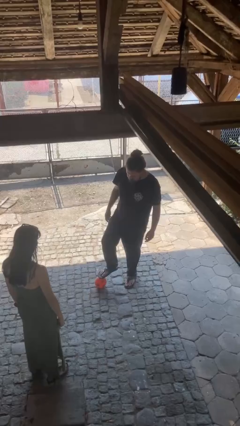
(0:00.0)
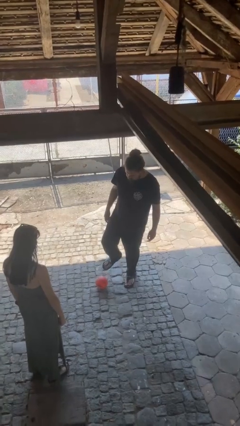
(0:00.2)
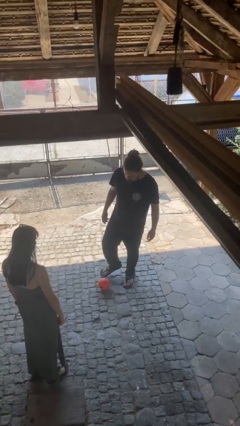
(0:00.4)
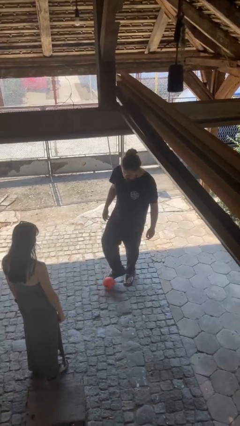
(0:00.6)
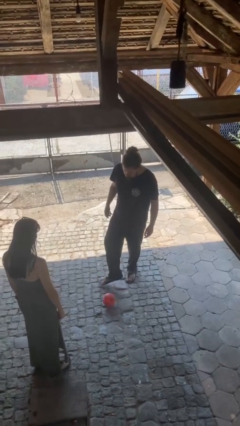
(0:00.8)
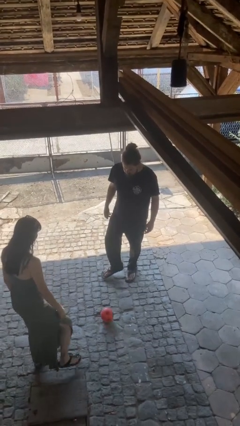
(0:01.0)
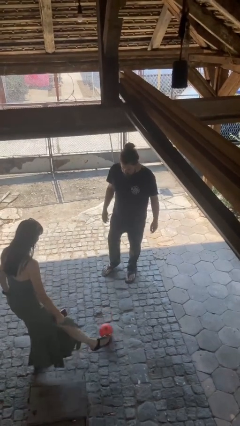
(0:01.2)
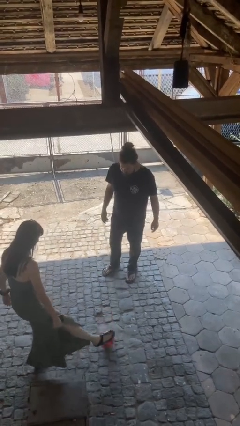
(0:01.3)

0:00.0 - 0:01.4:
person kicks object to person

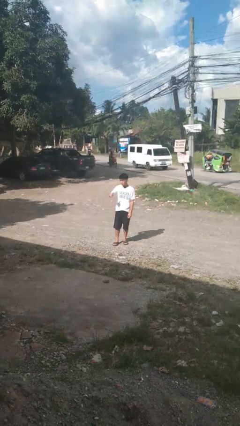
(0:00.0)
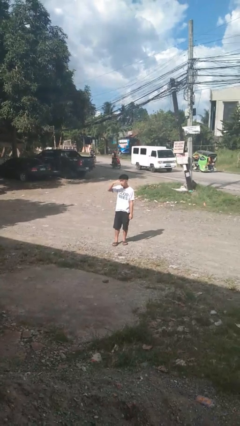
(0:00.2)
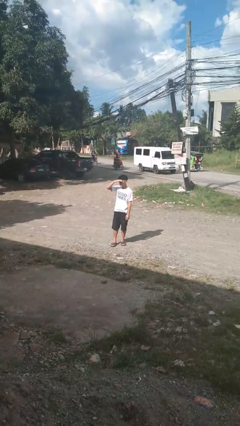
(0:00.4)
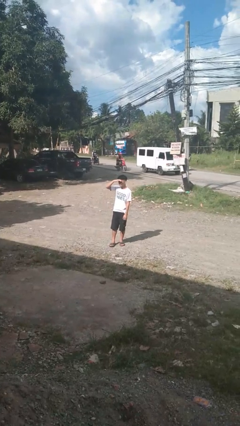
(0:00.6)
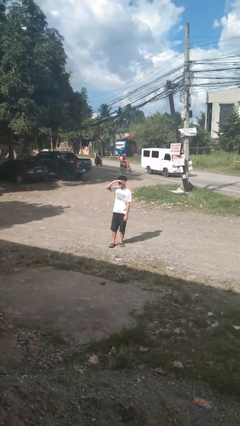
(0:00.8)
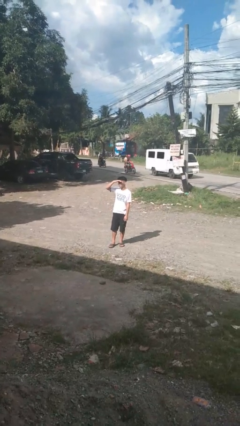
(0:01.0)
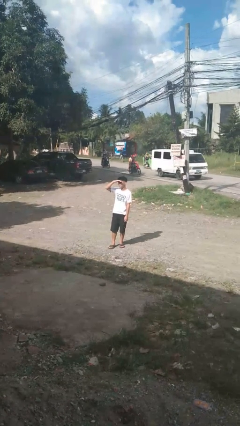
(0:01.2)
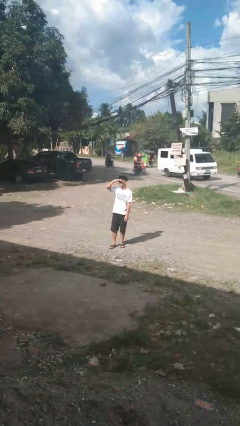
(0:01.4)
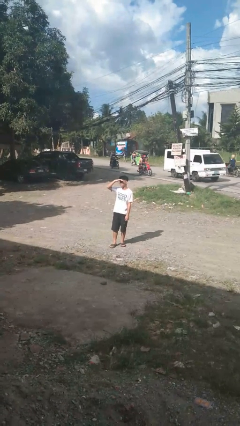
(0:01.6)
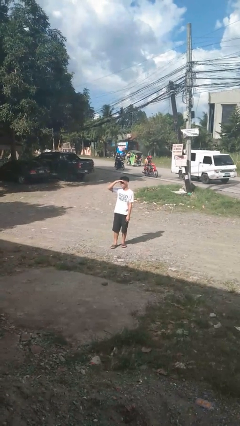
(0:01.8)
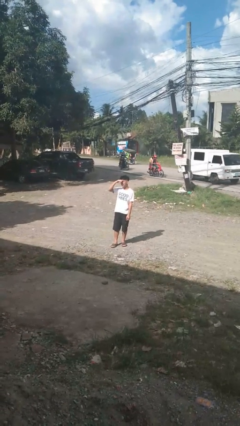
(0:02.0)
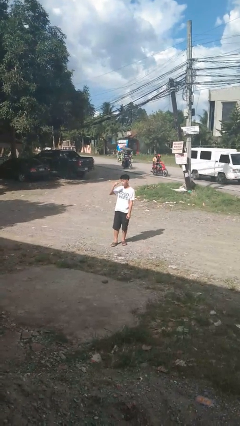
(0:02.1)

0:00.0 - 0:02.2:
person shades eyes

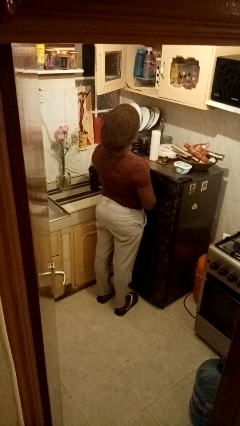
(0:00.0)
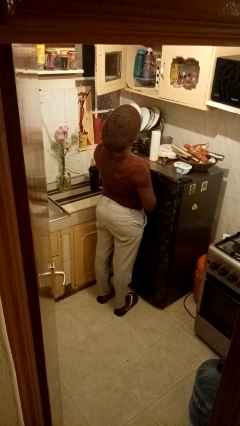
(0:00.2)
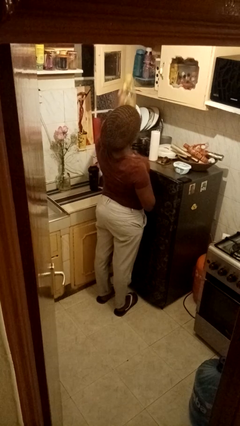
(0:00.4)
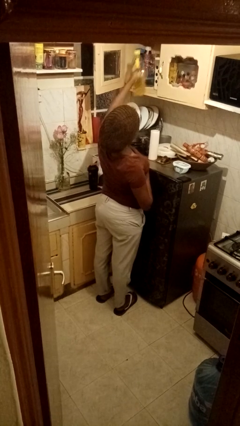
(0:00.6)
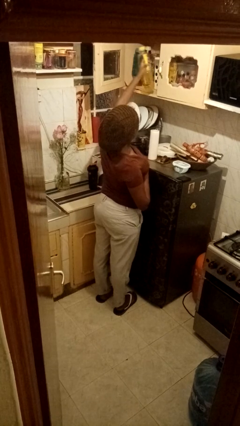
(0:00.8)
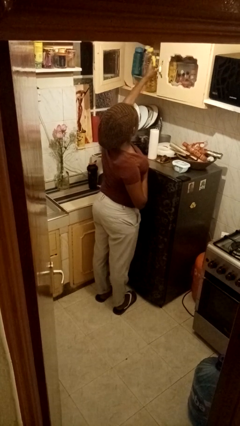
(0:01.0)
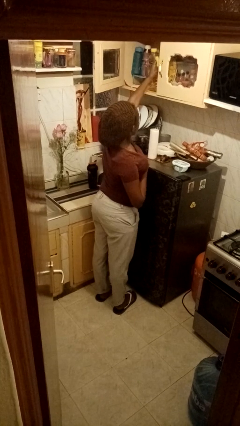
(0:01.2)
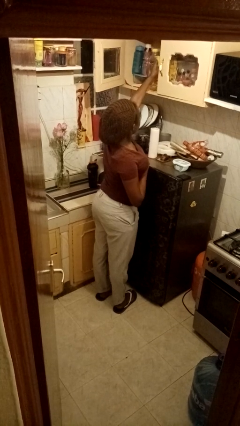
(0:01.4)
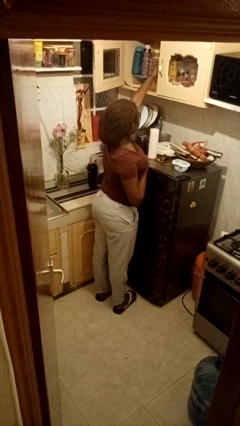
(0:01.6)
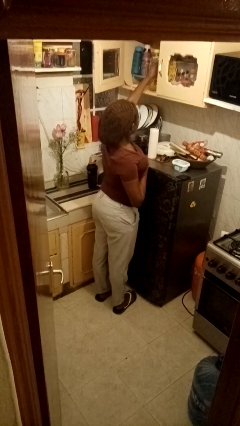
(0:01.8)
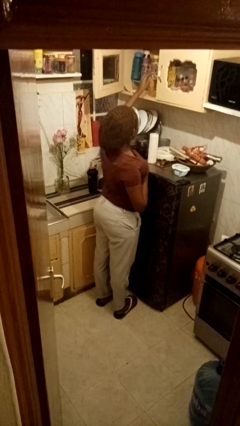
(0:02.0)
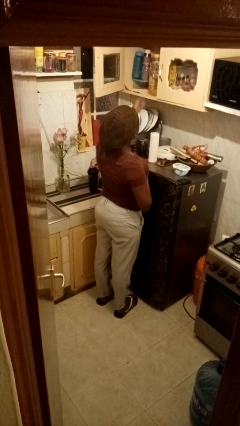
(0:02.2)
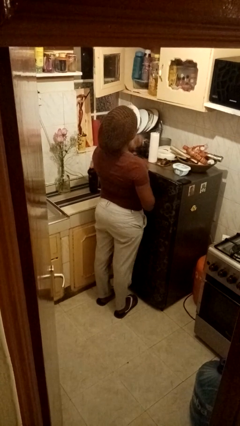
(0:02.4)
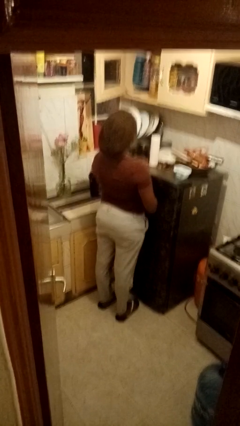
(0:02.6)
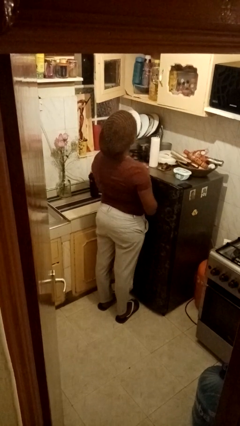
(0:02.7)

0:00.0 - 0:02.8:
person puts down object on shelf

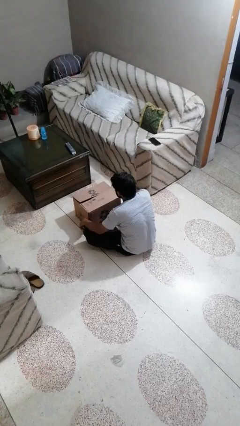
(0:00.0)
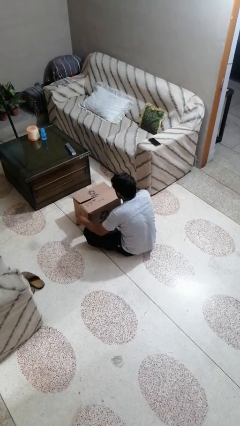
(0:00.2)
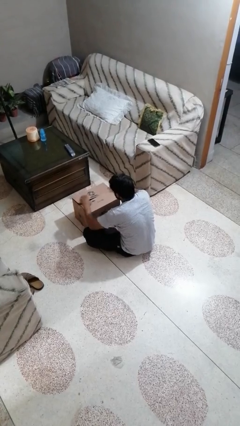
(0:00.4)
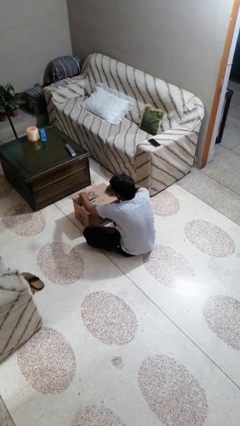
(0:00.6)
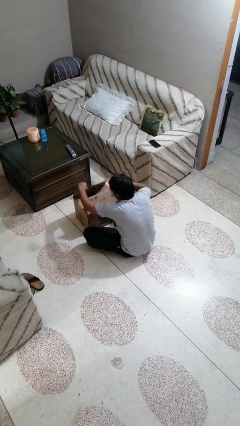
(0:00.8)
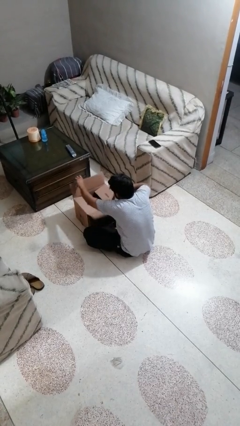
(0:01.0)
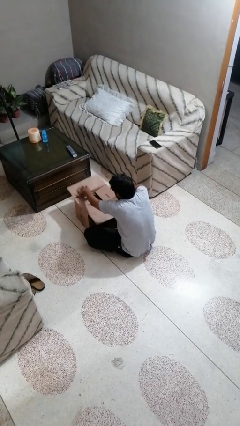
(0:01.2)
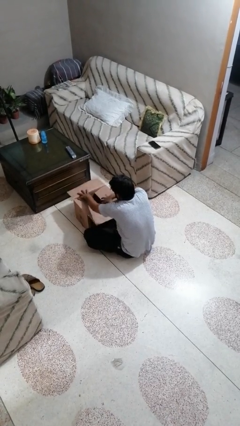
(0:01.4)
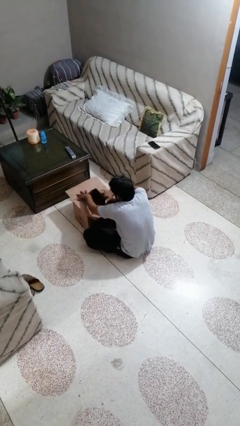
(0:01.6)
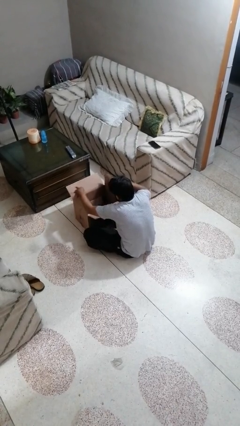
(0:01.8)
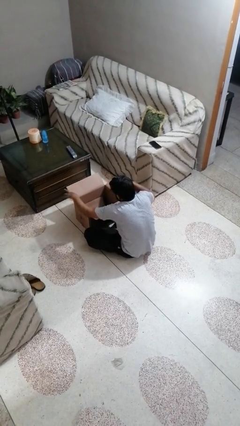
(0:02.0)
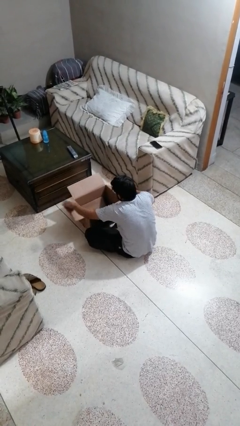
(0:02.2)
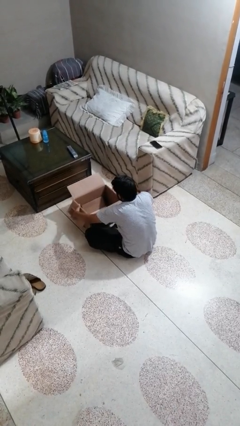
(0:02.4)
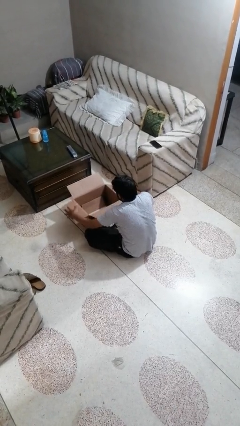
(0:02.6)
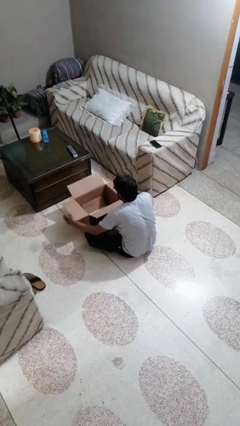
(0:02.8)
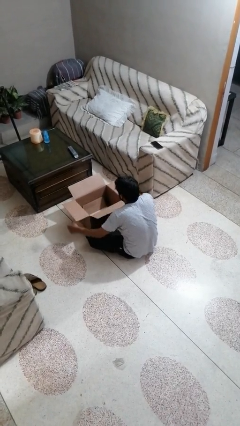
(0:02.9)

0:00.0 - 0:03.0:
person opens box

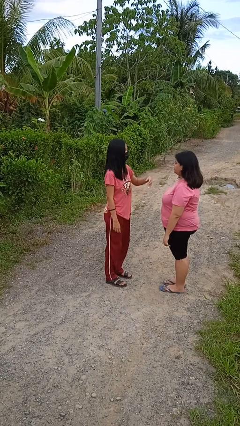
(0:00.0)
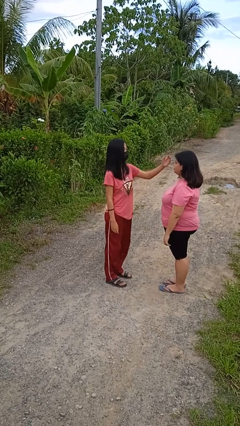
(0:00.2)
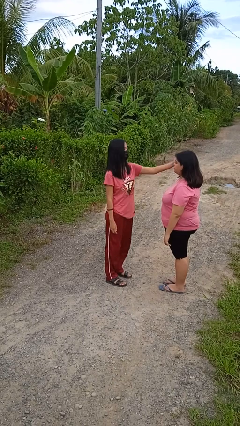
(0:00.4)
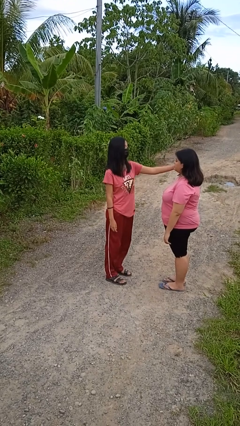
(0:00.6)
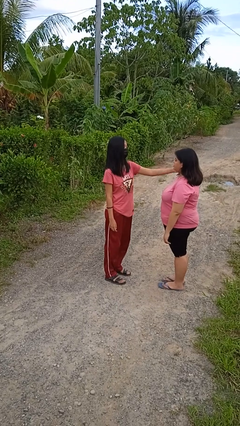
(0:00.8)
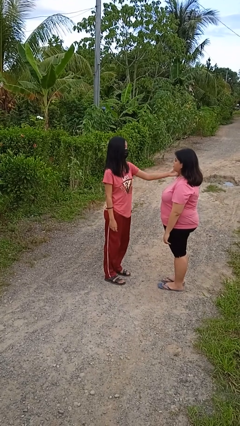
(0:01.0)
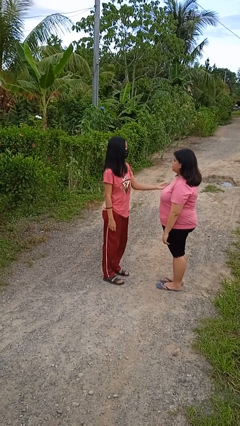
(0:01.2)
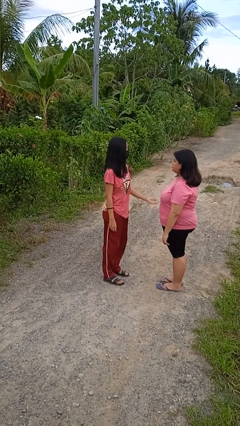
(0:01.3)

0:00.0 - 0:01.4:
person touches face of person

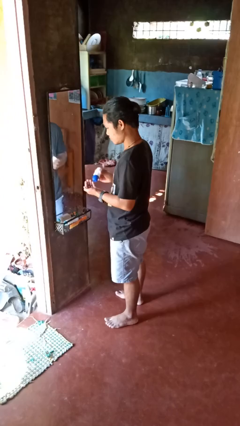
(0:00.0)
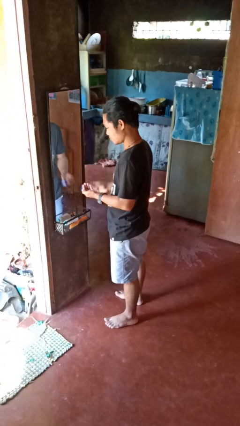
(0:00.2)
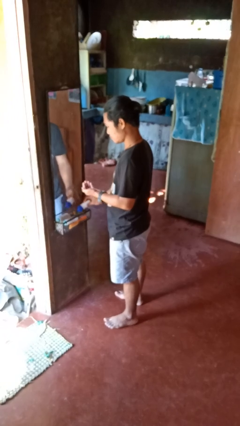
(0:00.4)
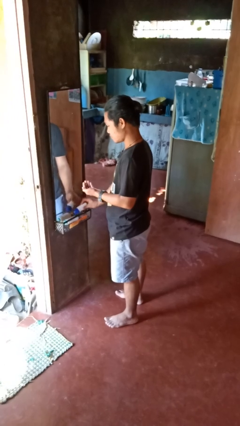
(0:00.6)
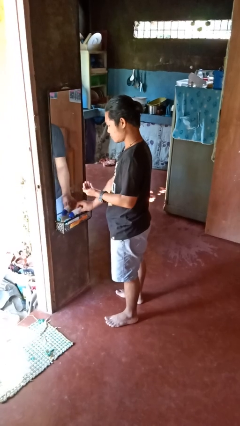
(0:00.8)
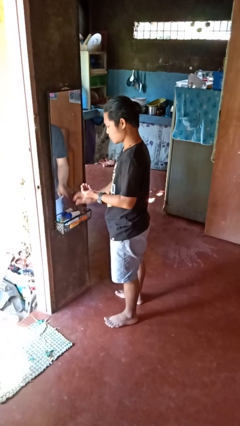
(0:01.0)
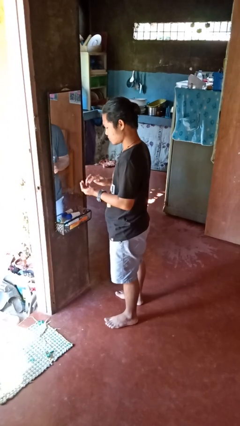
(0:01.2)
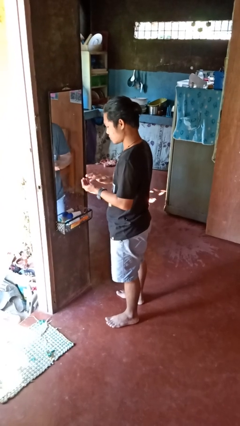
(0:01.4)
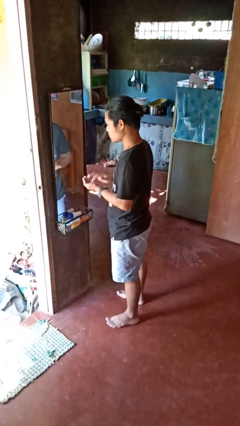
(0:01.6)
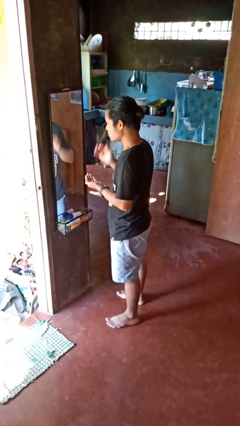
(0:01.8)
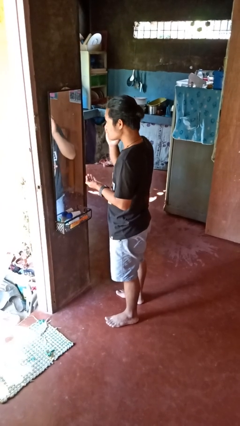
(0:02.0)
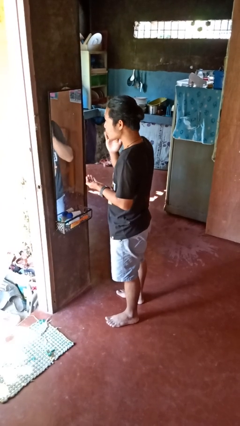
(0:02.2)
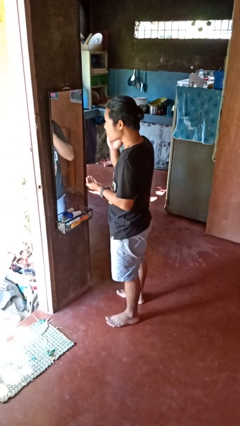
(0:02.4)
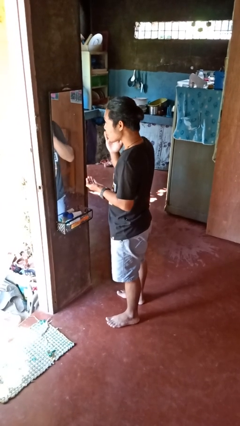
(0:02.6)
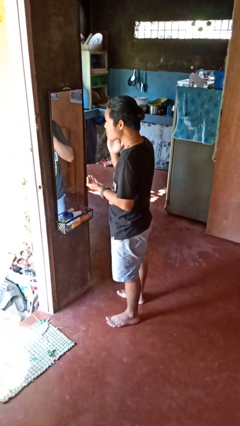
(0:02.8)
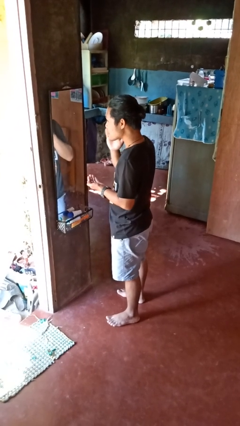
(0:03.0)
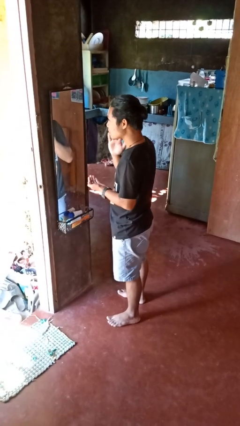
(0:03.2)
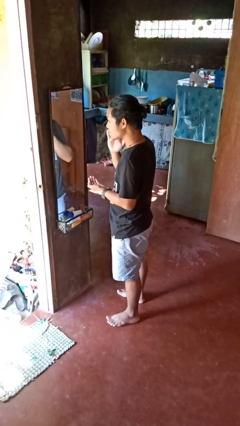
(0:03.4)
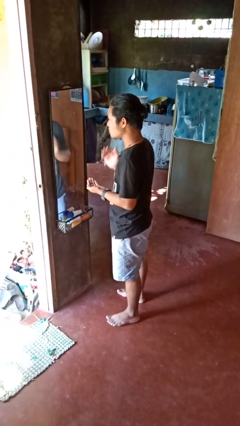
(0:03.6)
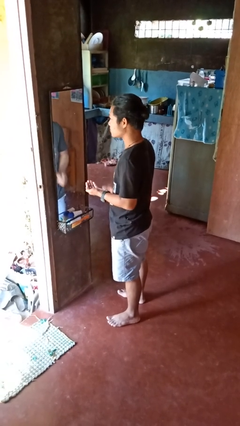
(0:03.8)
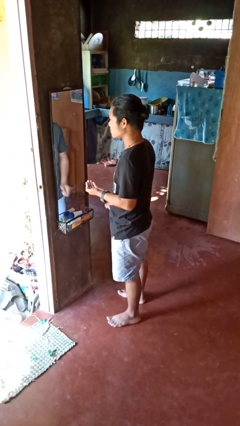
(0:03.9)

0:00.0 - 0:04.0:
person applies foundation makeup

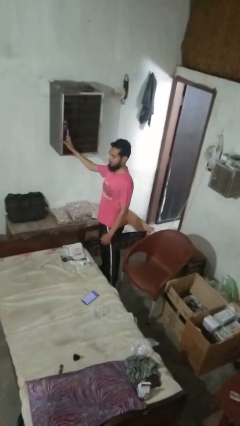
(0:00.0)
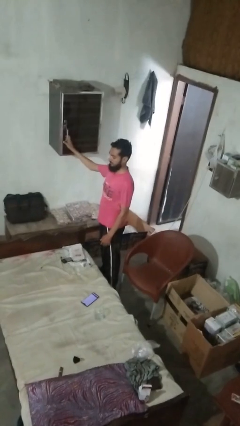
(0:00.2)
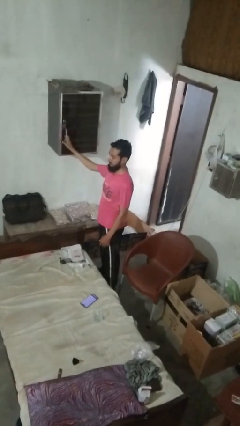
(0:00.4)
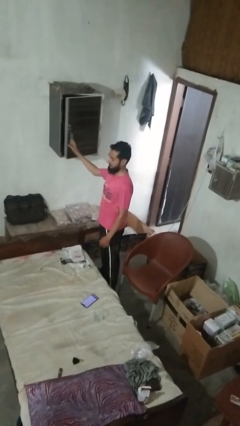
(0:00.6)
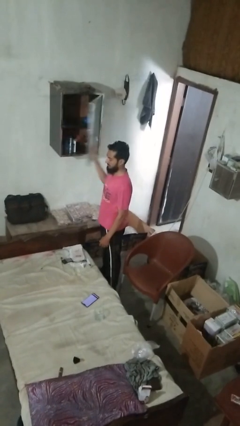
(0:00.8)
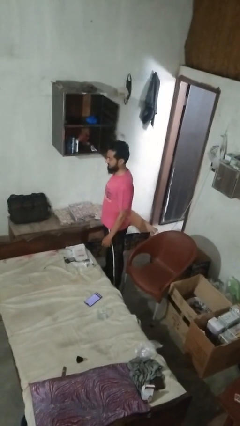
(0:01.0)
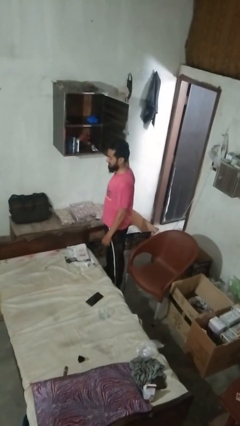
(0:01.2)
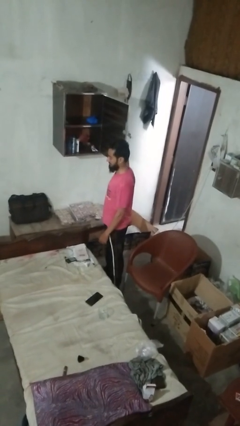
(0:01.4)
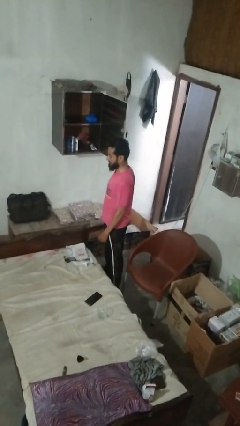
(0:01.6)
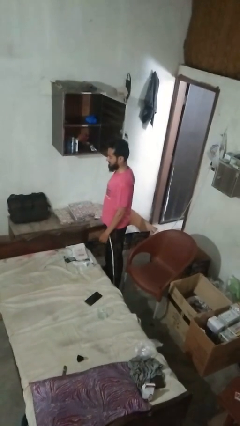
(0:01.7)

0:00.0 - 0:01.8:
person opens closet door

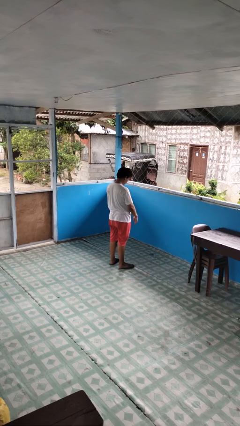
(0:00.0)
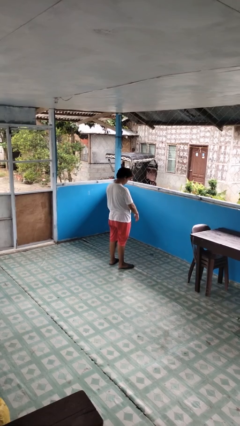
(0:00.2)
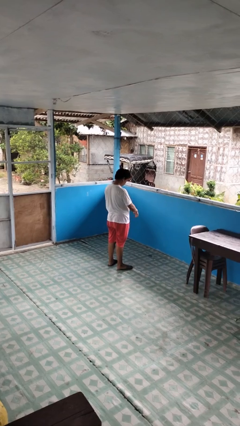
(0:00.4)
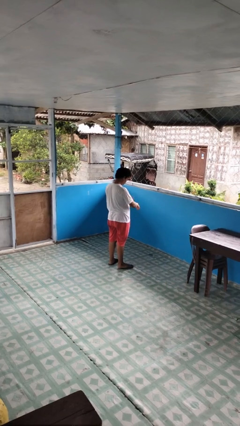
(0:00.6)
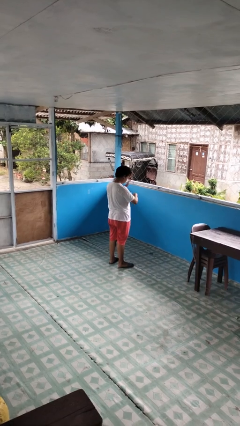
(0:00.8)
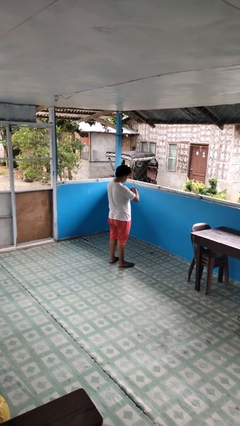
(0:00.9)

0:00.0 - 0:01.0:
person swats bug
